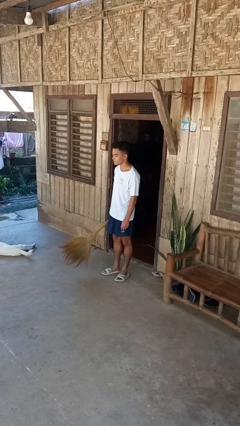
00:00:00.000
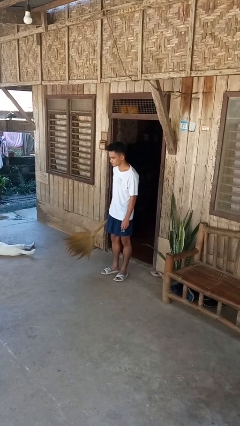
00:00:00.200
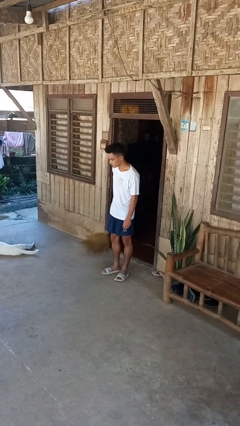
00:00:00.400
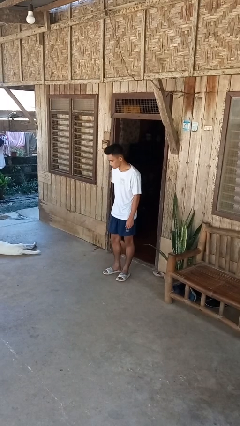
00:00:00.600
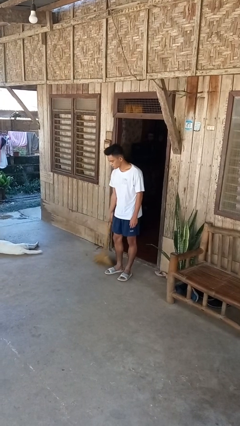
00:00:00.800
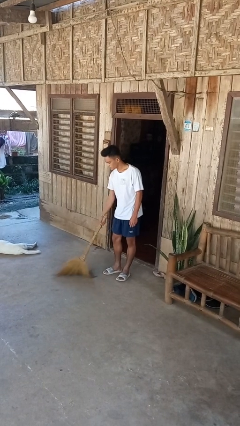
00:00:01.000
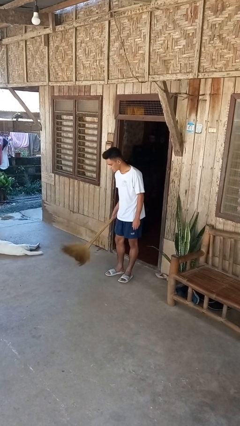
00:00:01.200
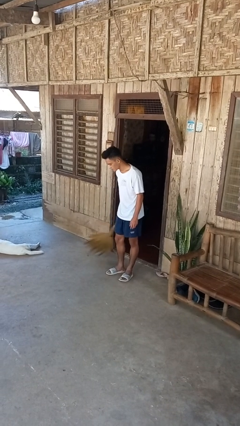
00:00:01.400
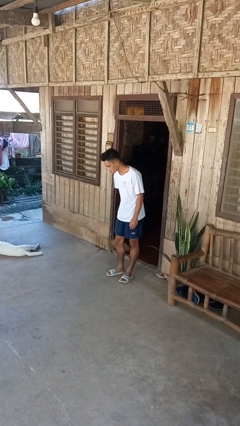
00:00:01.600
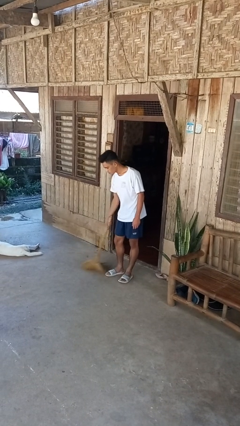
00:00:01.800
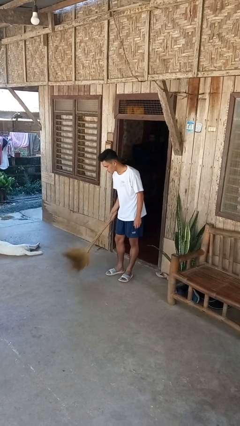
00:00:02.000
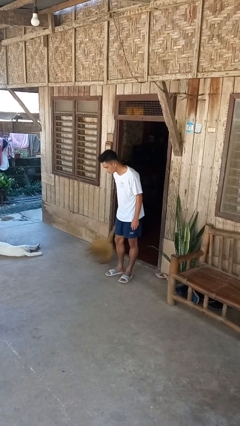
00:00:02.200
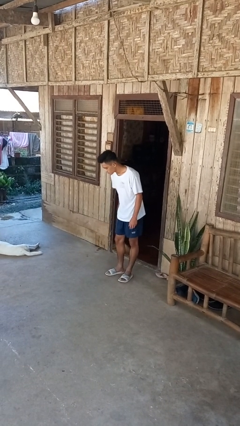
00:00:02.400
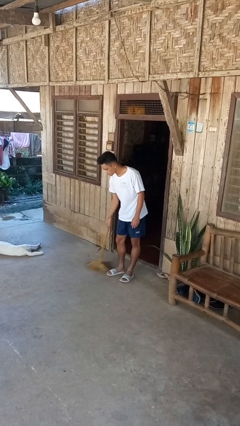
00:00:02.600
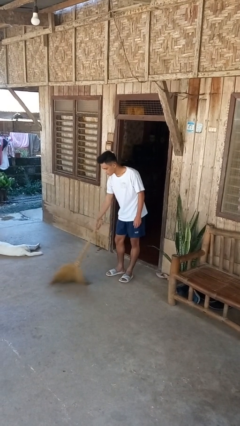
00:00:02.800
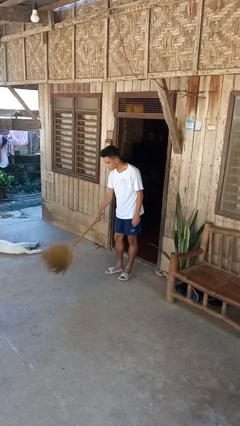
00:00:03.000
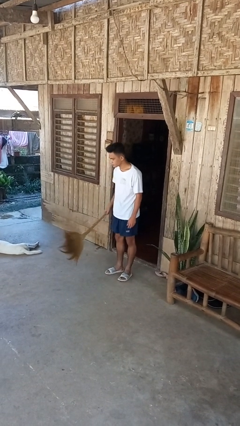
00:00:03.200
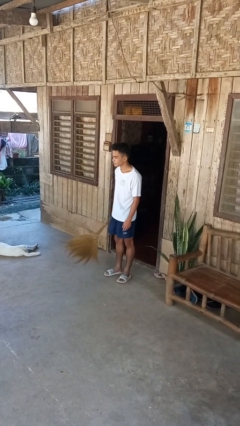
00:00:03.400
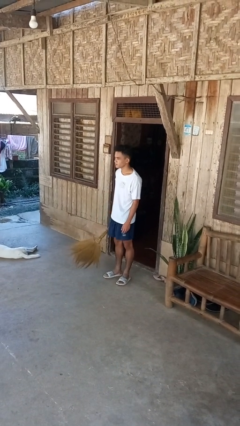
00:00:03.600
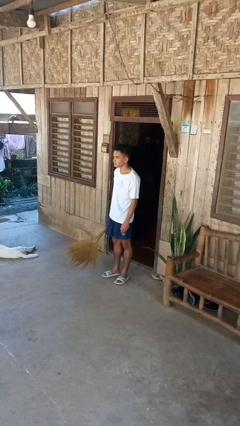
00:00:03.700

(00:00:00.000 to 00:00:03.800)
person sweeps floor

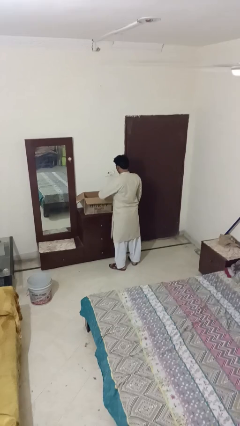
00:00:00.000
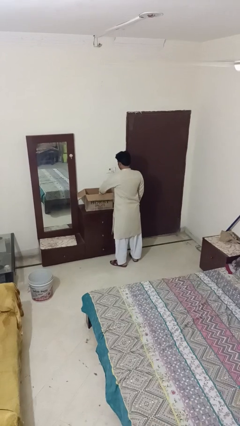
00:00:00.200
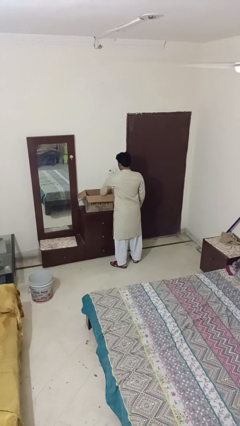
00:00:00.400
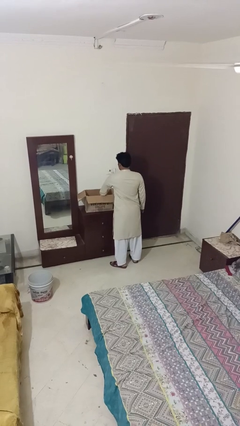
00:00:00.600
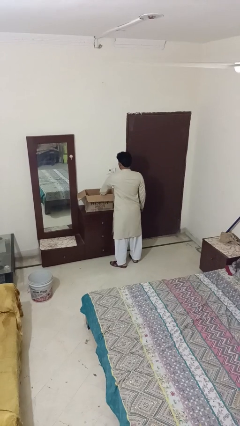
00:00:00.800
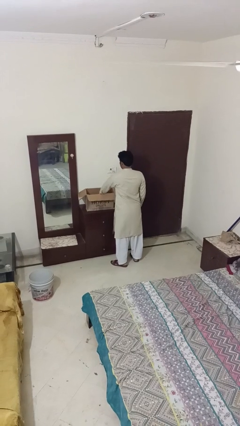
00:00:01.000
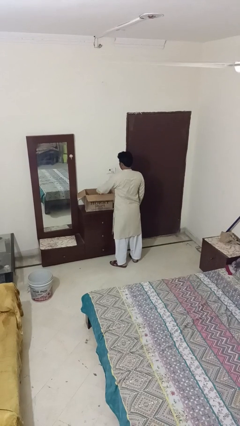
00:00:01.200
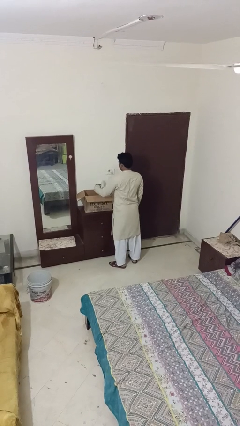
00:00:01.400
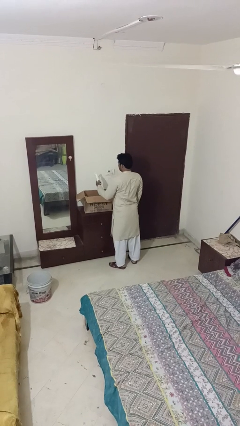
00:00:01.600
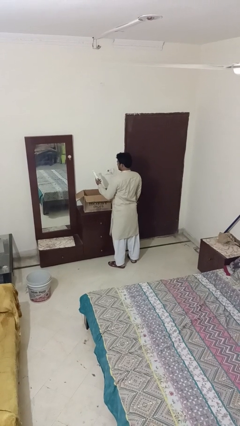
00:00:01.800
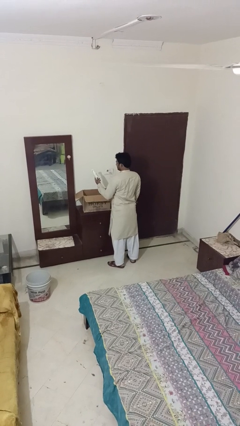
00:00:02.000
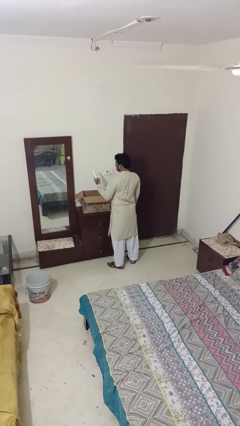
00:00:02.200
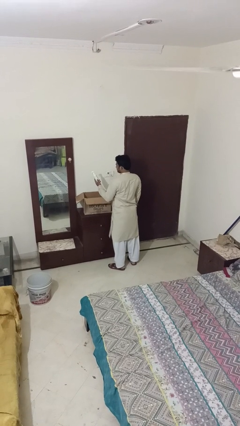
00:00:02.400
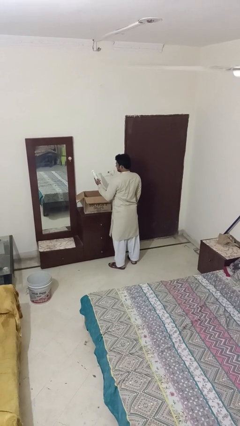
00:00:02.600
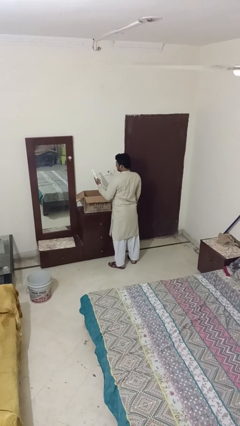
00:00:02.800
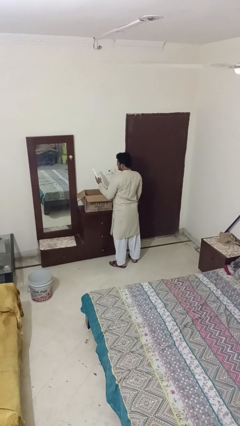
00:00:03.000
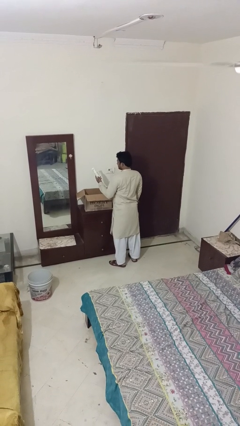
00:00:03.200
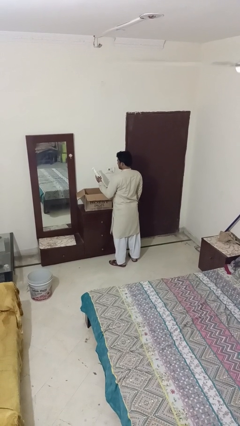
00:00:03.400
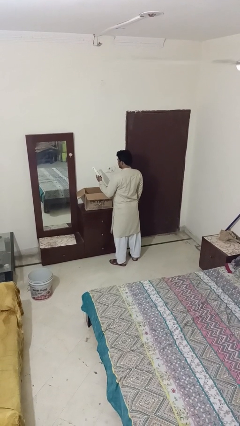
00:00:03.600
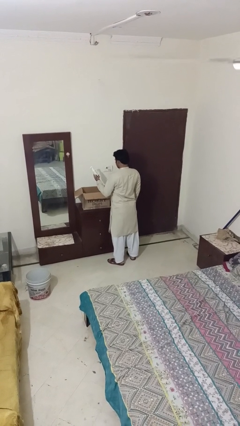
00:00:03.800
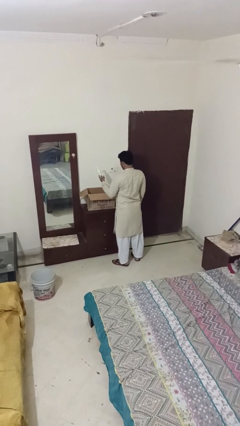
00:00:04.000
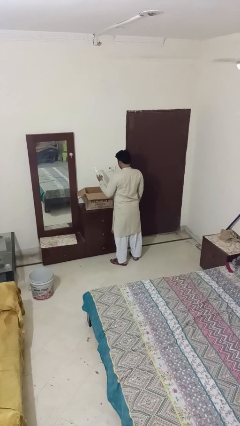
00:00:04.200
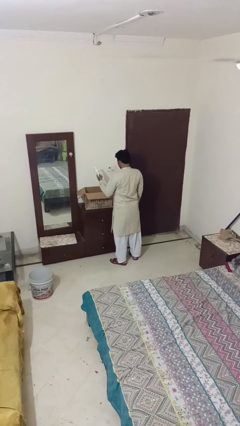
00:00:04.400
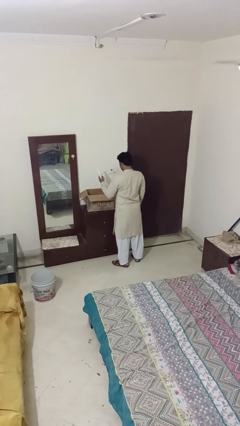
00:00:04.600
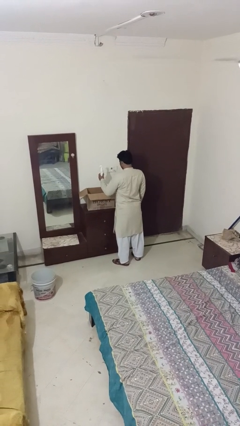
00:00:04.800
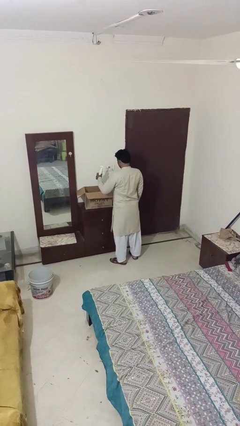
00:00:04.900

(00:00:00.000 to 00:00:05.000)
person takes object from box

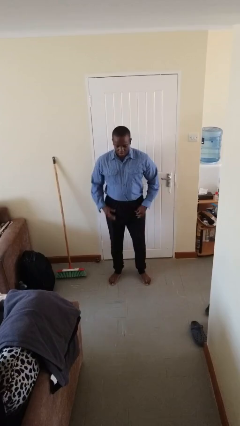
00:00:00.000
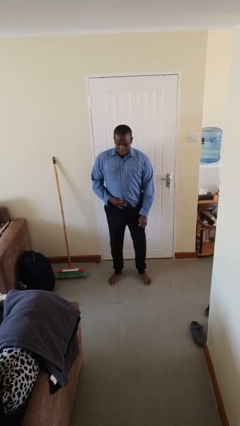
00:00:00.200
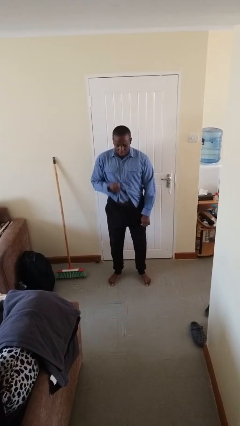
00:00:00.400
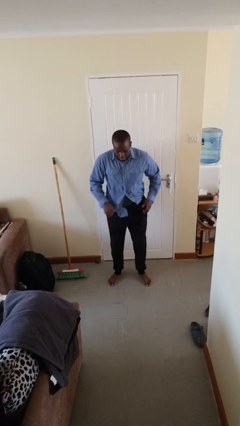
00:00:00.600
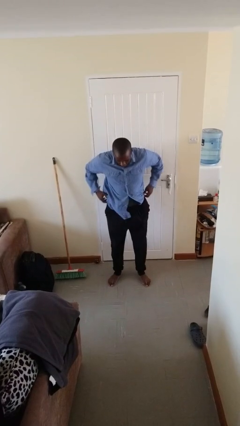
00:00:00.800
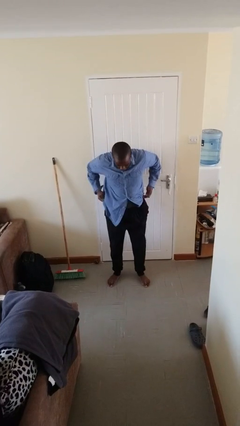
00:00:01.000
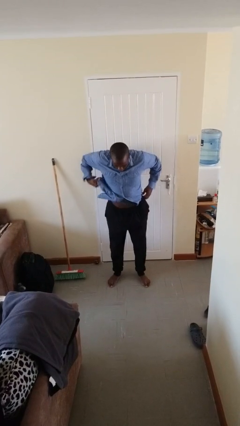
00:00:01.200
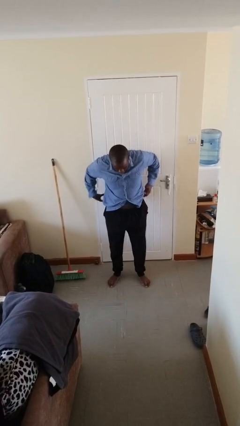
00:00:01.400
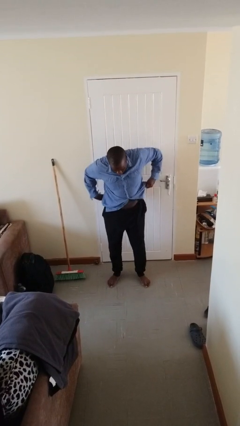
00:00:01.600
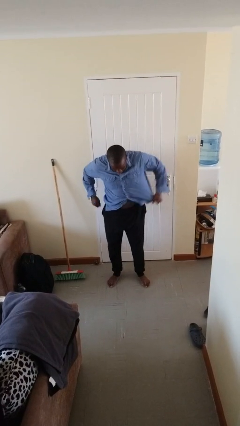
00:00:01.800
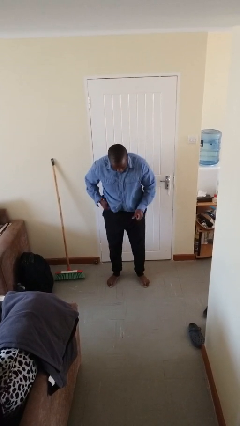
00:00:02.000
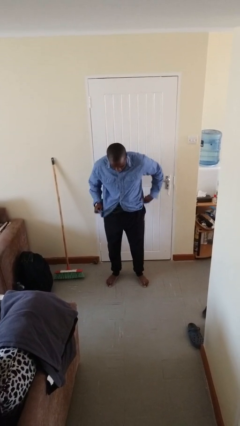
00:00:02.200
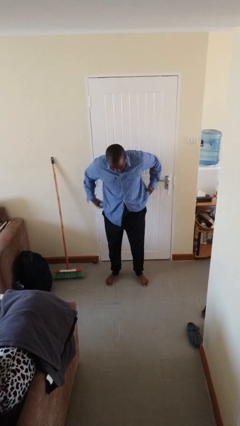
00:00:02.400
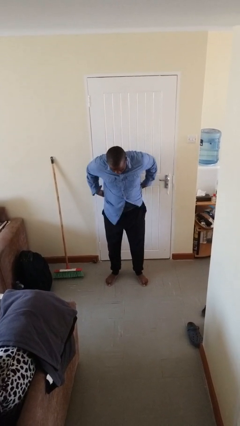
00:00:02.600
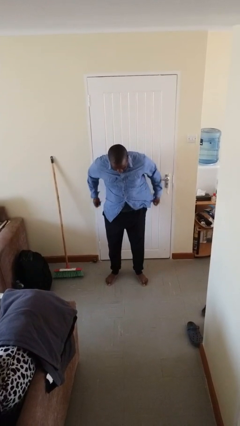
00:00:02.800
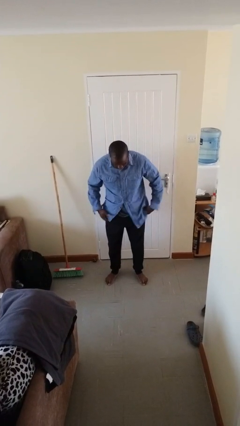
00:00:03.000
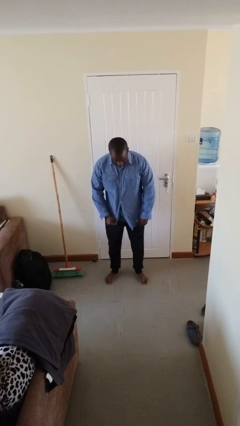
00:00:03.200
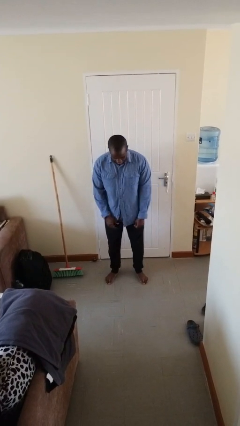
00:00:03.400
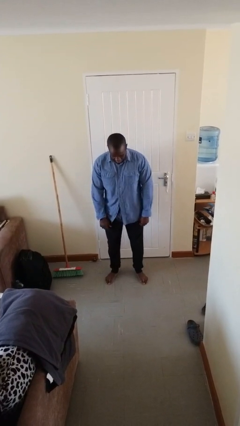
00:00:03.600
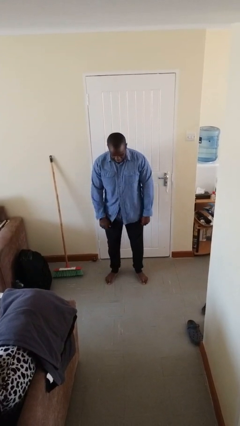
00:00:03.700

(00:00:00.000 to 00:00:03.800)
person untucks shirt

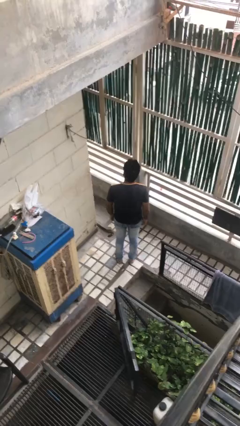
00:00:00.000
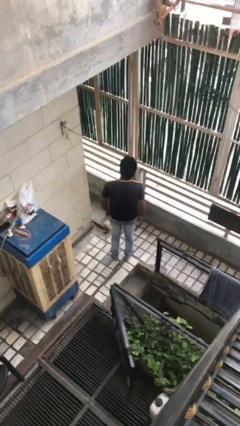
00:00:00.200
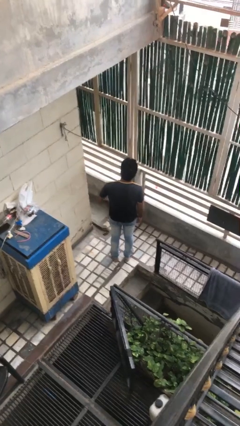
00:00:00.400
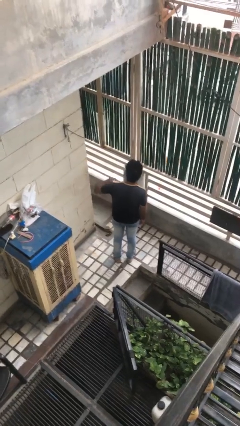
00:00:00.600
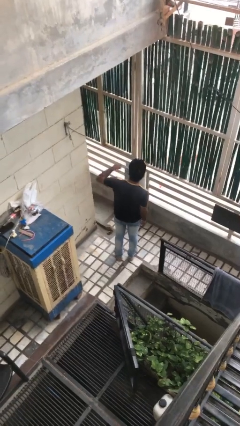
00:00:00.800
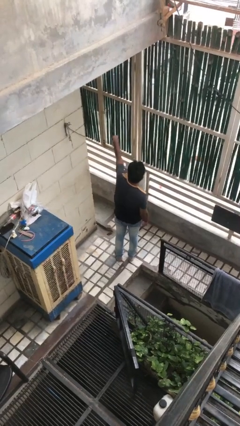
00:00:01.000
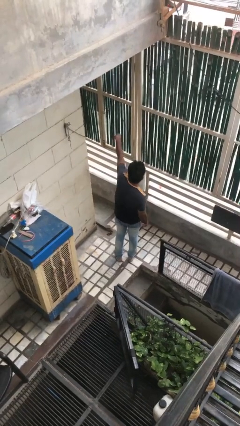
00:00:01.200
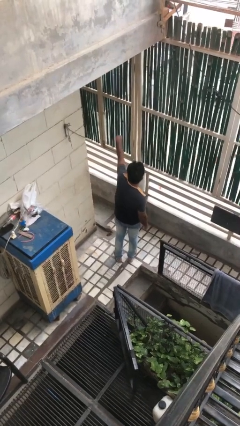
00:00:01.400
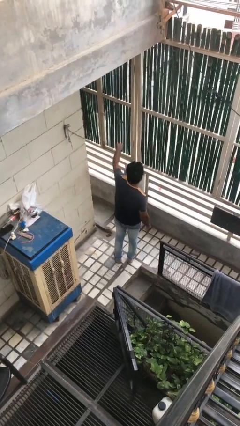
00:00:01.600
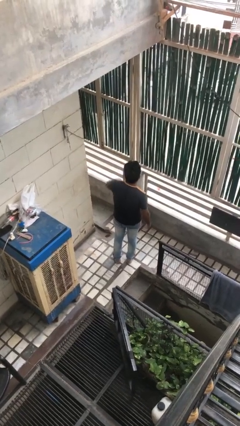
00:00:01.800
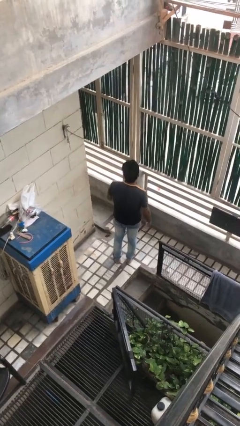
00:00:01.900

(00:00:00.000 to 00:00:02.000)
person punches

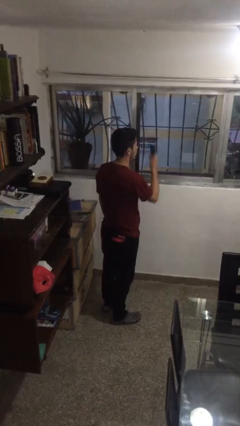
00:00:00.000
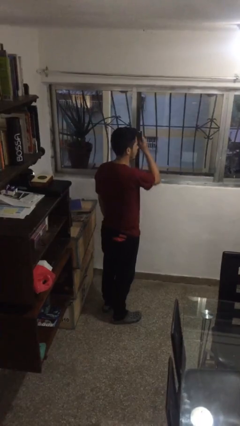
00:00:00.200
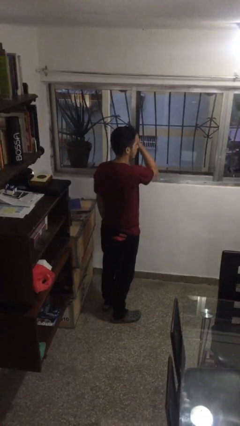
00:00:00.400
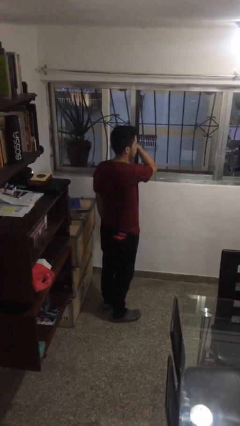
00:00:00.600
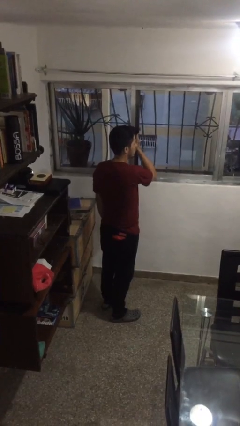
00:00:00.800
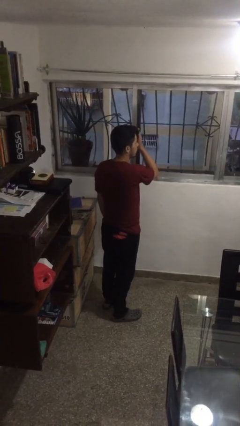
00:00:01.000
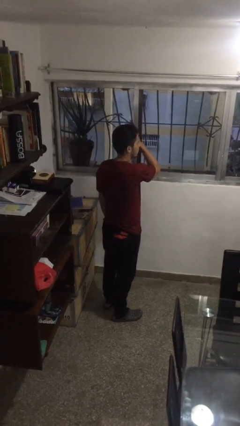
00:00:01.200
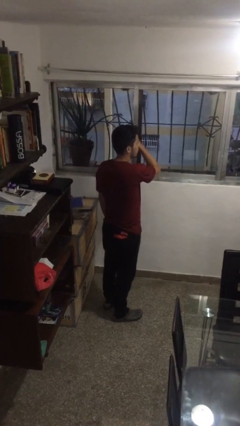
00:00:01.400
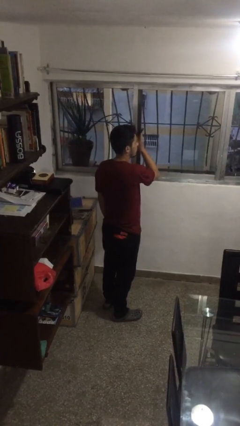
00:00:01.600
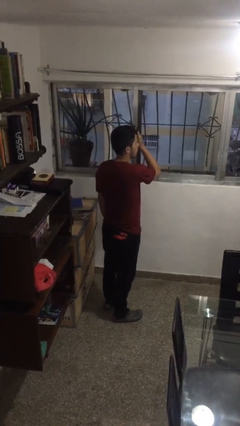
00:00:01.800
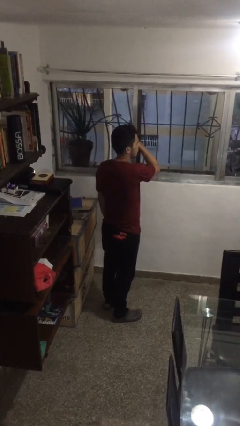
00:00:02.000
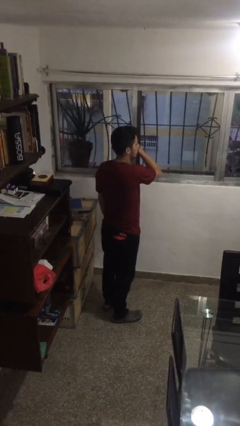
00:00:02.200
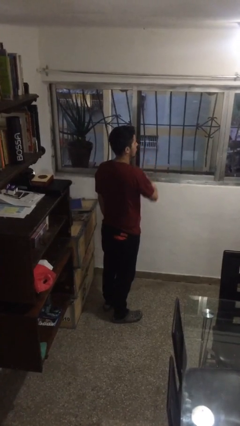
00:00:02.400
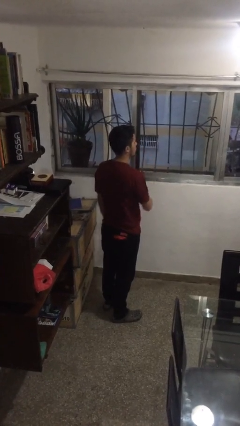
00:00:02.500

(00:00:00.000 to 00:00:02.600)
person brushes hair
